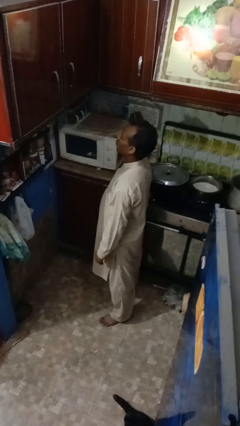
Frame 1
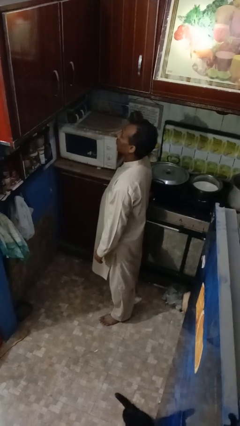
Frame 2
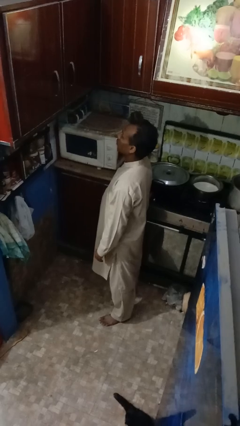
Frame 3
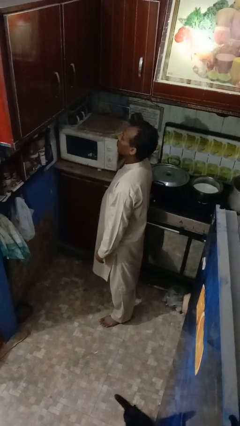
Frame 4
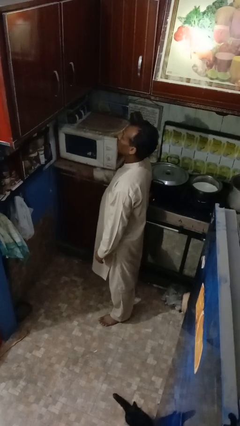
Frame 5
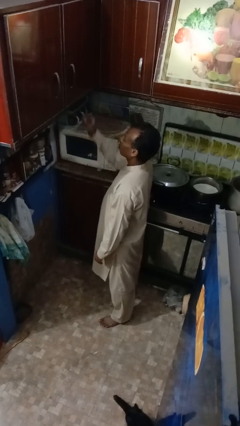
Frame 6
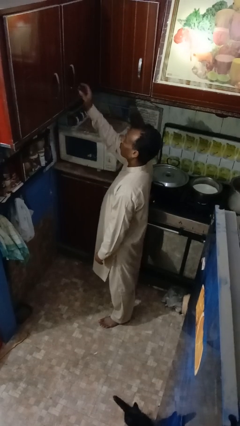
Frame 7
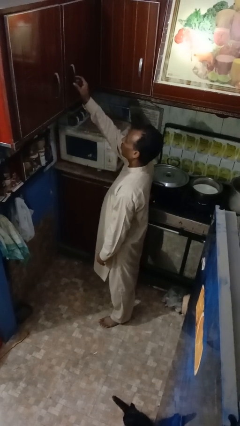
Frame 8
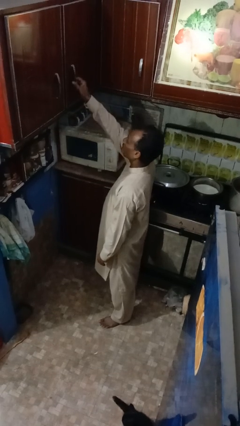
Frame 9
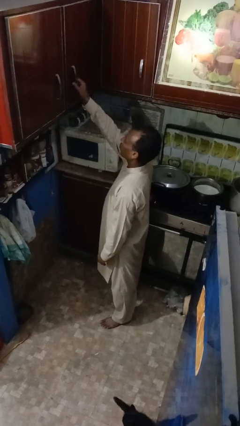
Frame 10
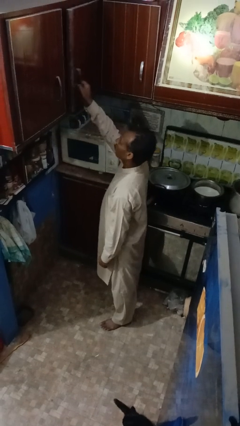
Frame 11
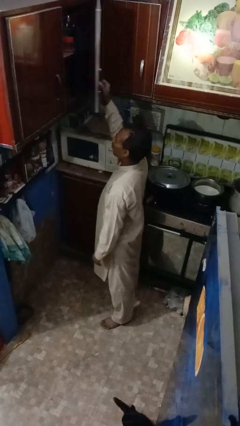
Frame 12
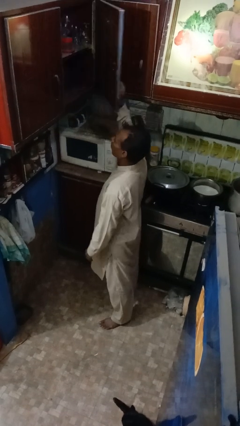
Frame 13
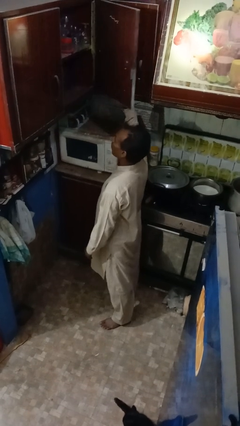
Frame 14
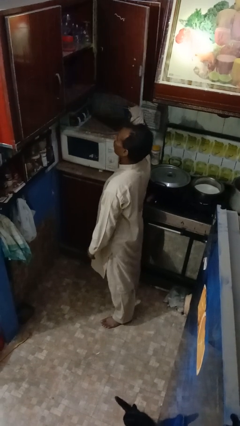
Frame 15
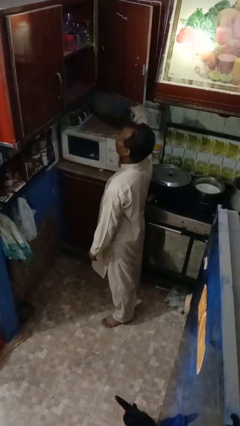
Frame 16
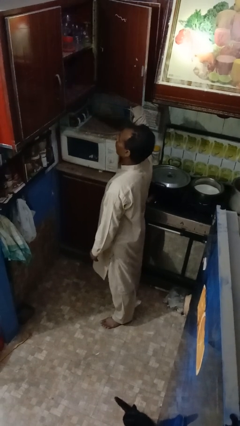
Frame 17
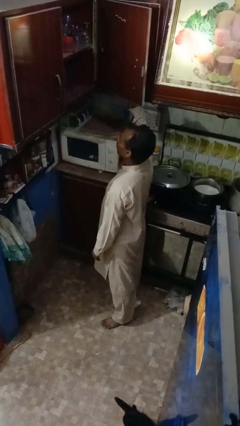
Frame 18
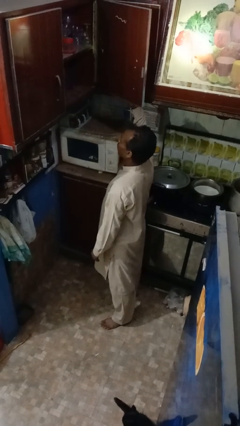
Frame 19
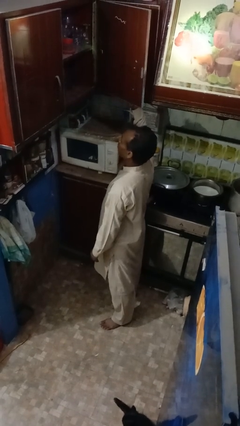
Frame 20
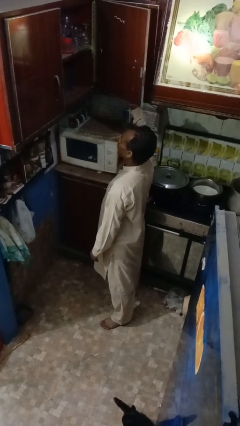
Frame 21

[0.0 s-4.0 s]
person opens cabinet

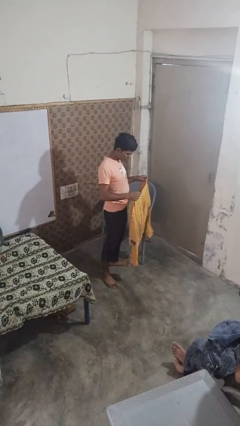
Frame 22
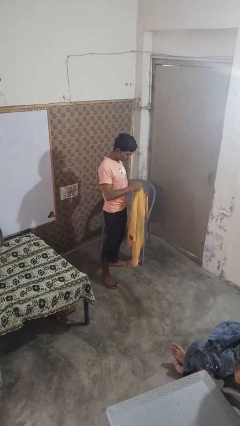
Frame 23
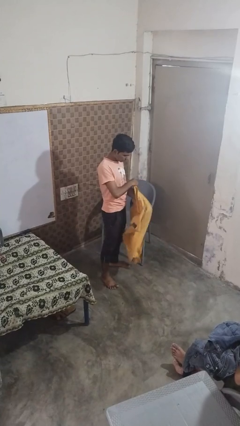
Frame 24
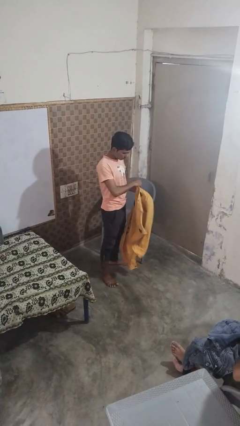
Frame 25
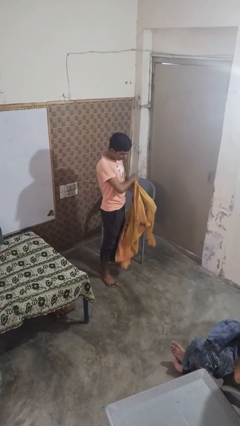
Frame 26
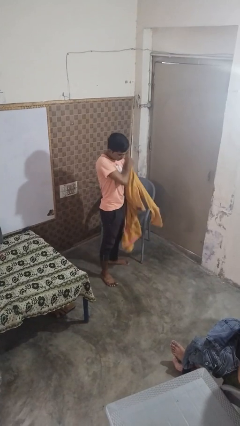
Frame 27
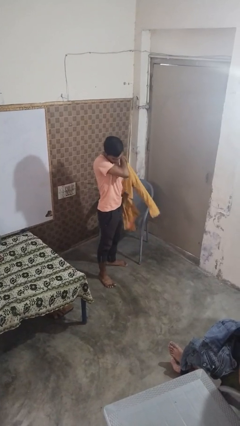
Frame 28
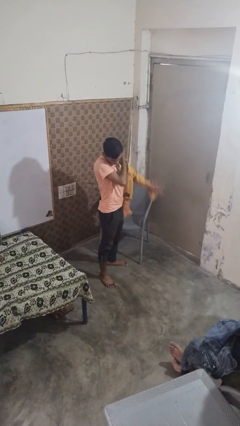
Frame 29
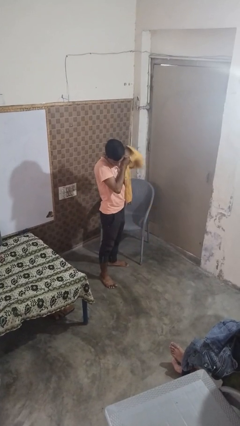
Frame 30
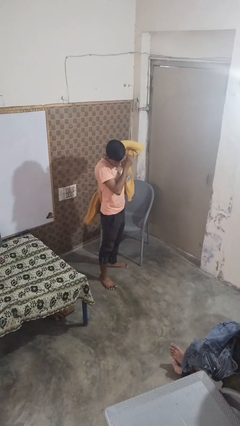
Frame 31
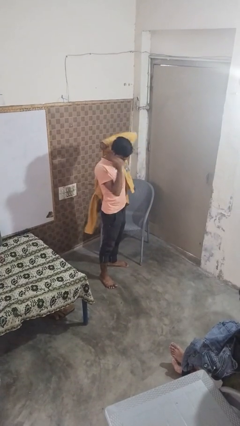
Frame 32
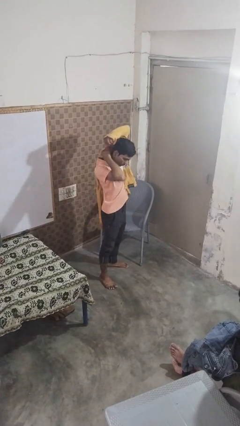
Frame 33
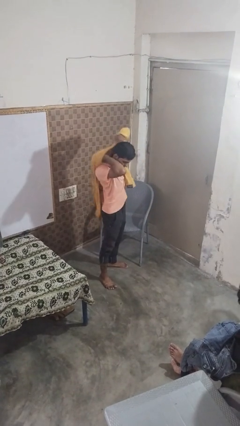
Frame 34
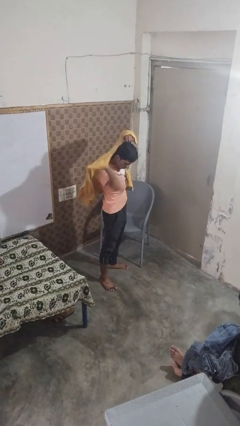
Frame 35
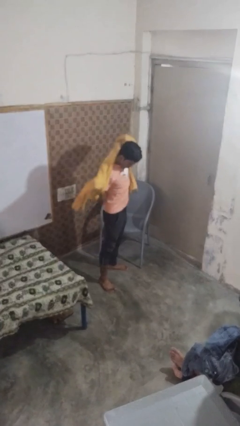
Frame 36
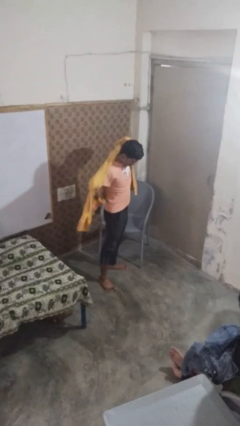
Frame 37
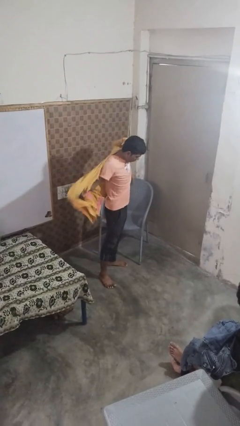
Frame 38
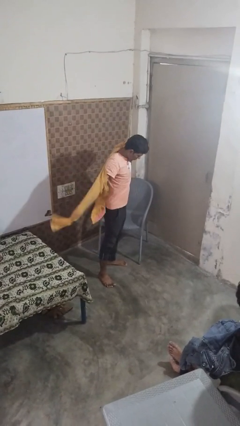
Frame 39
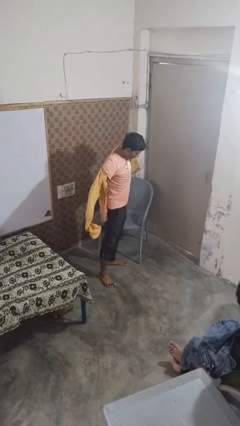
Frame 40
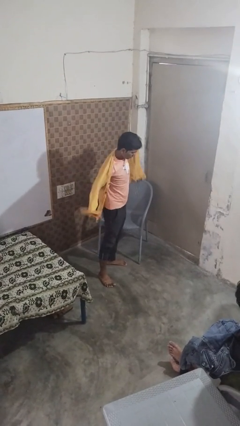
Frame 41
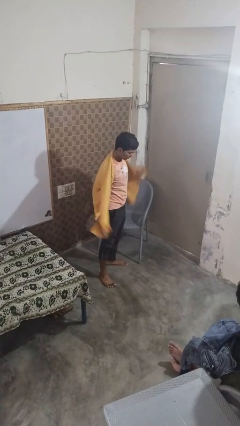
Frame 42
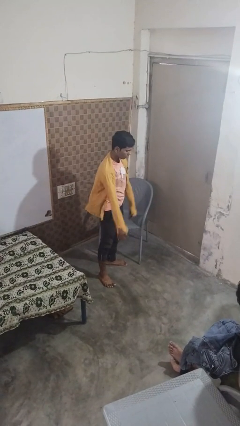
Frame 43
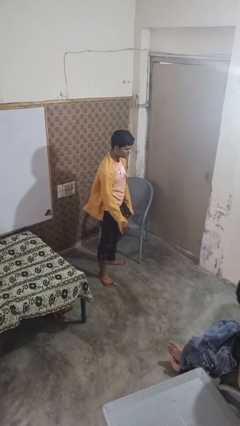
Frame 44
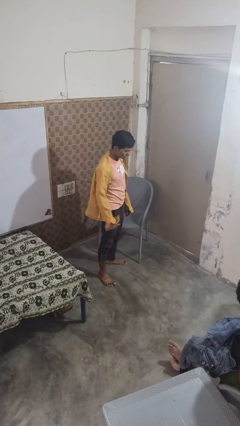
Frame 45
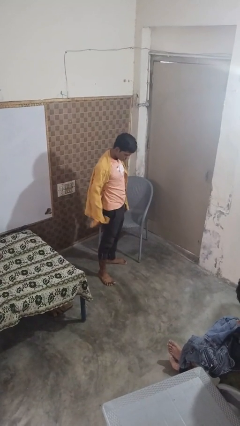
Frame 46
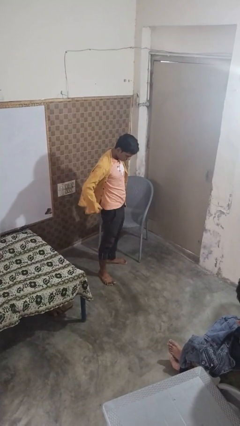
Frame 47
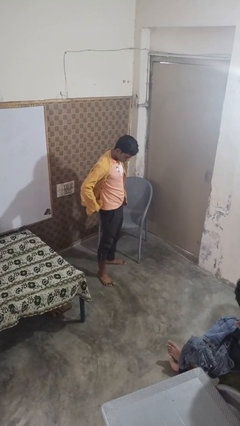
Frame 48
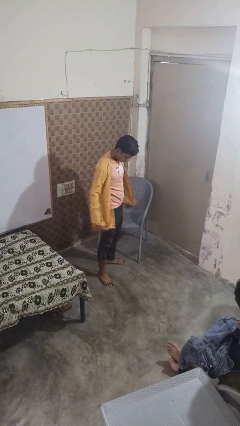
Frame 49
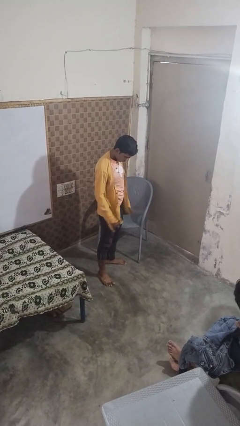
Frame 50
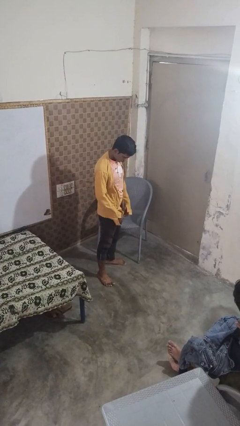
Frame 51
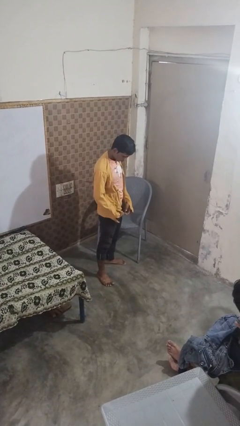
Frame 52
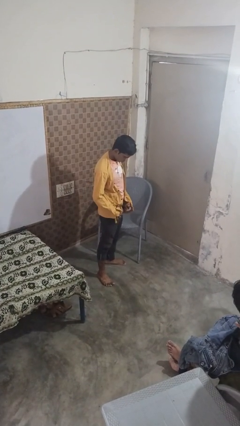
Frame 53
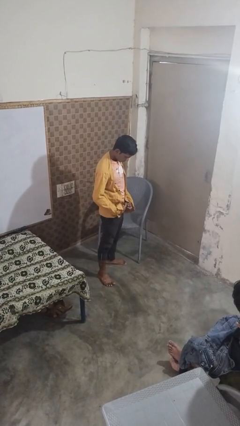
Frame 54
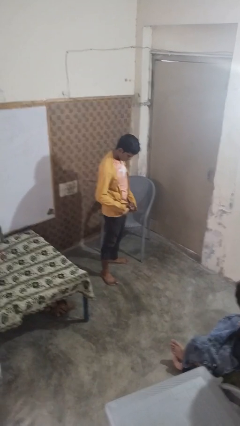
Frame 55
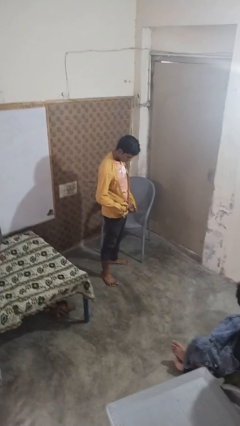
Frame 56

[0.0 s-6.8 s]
person puts on shirt

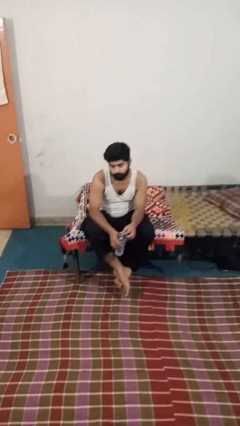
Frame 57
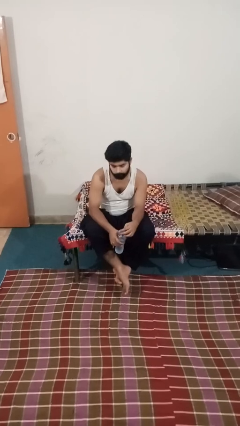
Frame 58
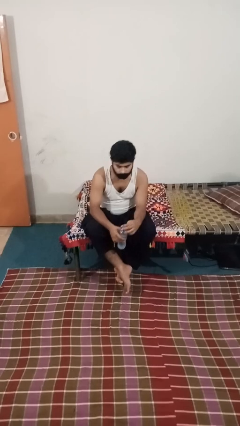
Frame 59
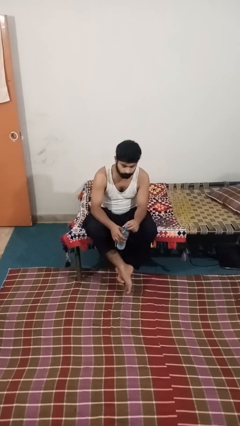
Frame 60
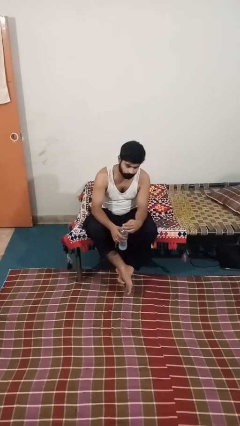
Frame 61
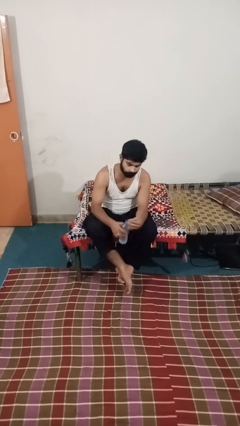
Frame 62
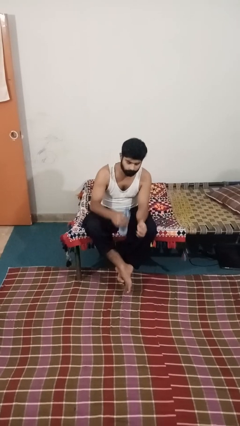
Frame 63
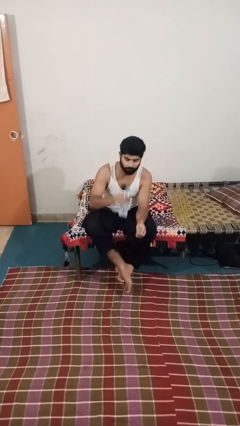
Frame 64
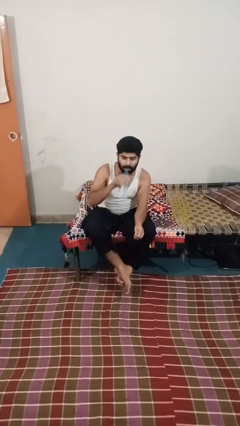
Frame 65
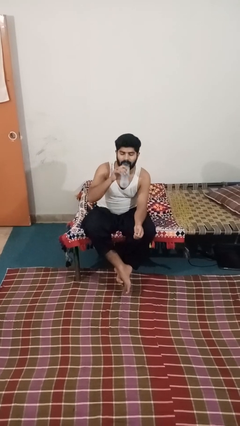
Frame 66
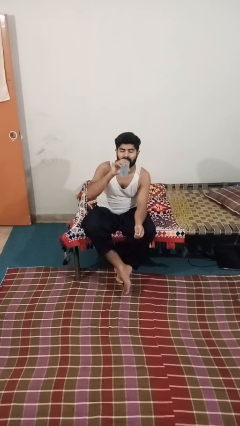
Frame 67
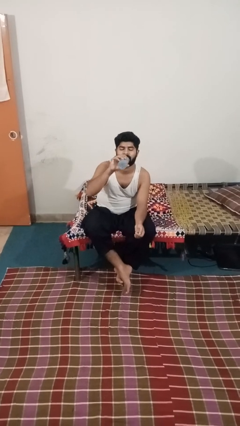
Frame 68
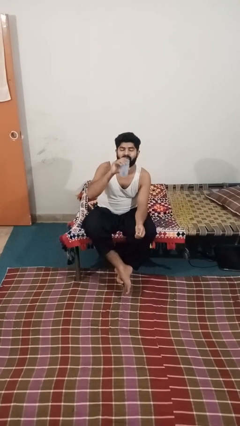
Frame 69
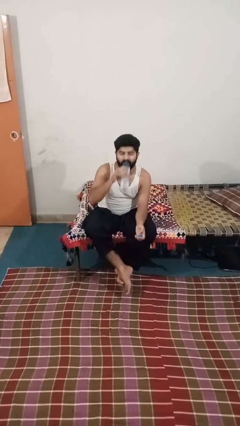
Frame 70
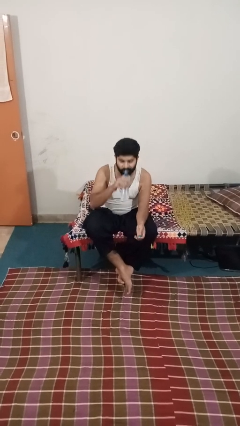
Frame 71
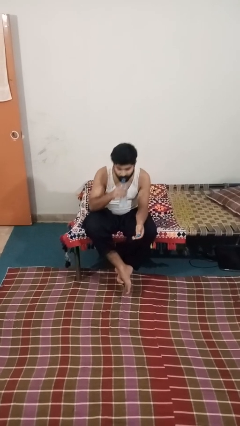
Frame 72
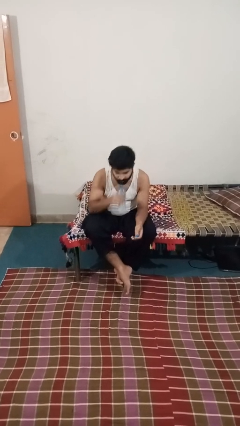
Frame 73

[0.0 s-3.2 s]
person drinks from bottle

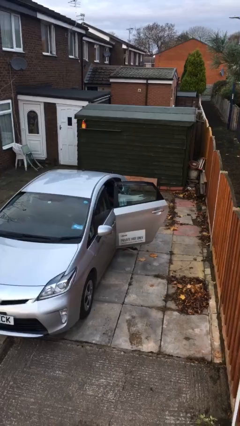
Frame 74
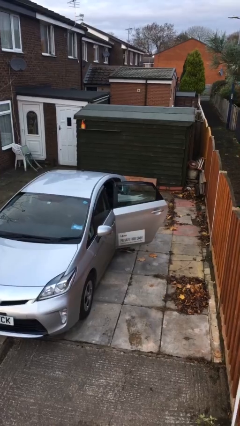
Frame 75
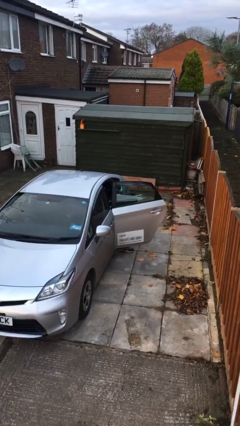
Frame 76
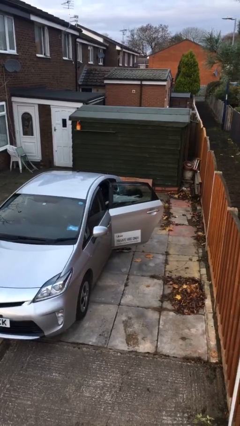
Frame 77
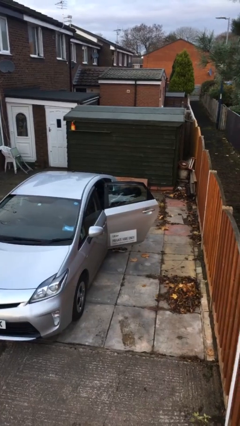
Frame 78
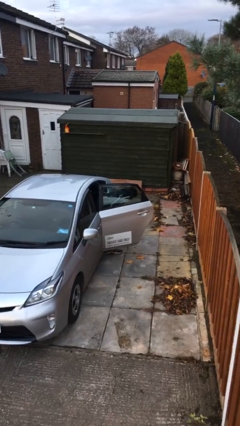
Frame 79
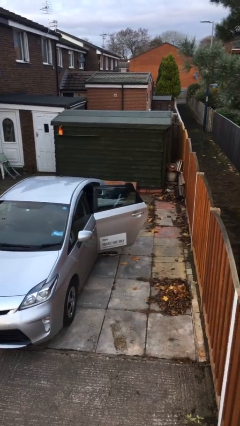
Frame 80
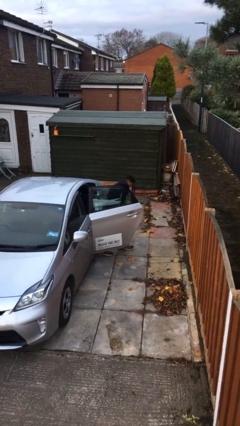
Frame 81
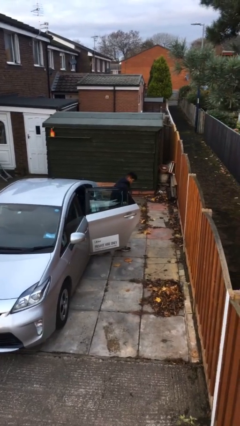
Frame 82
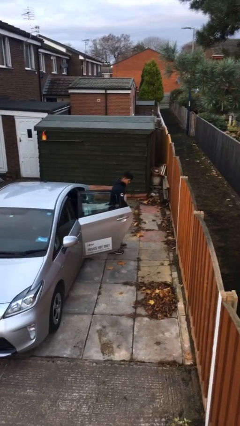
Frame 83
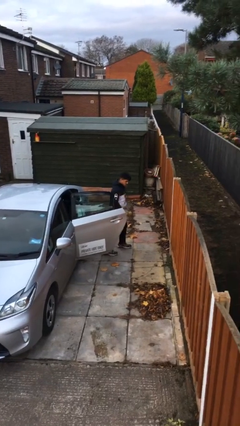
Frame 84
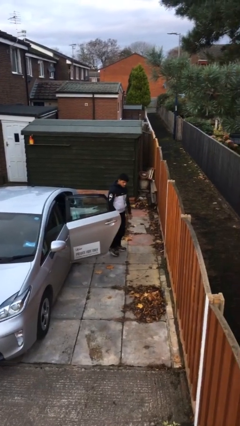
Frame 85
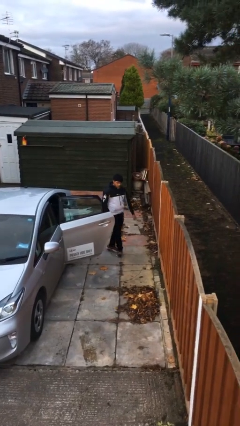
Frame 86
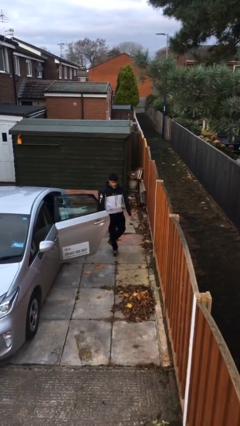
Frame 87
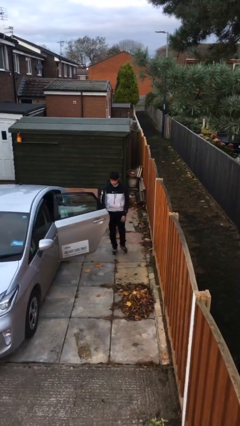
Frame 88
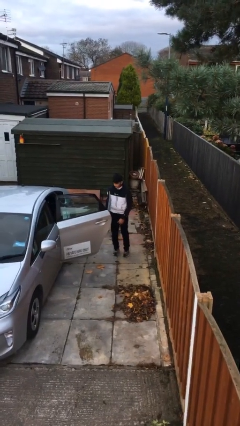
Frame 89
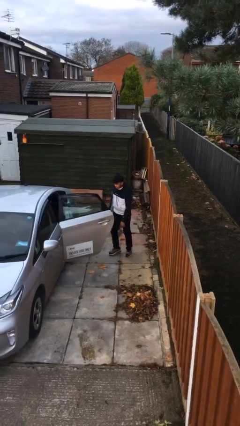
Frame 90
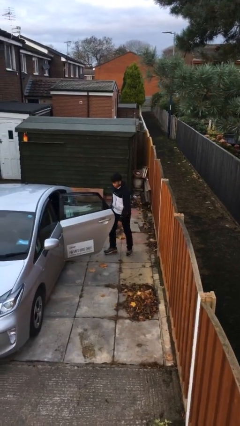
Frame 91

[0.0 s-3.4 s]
person exits car

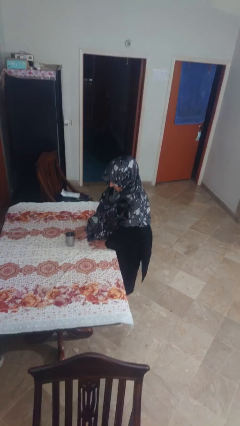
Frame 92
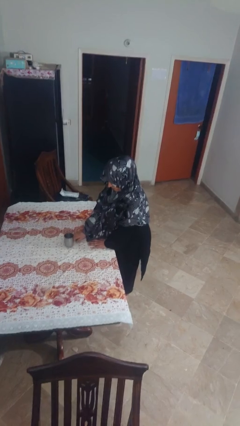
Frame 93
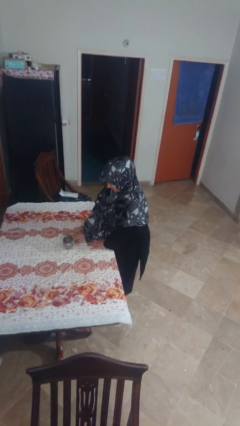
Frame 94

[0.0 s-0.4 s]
person sets upright glass
